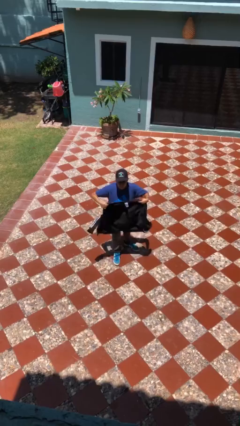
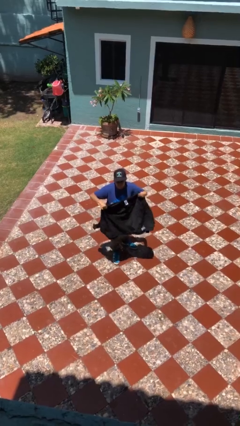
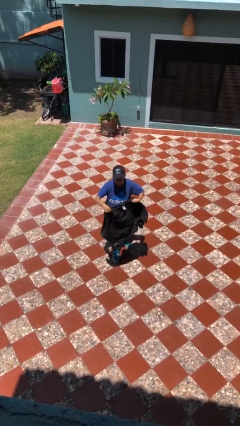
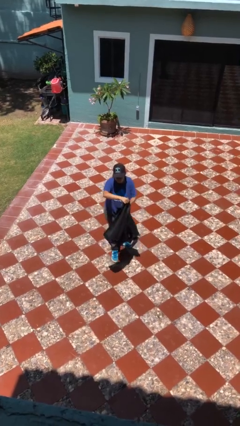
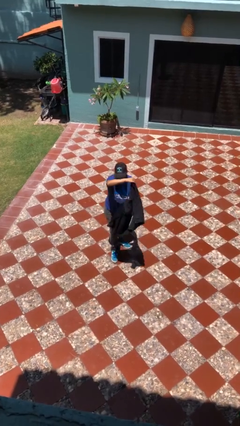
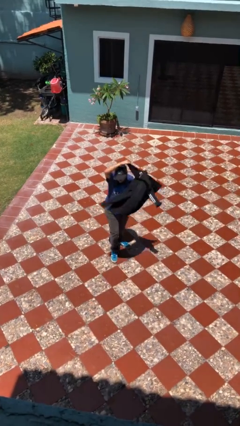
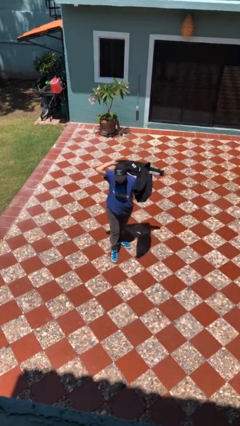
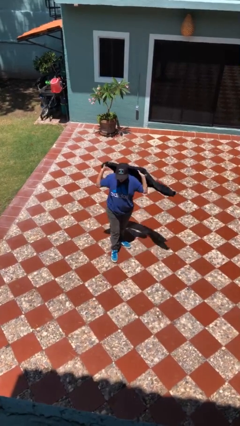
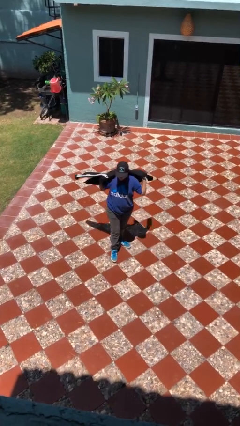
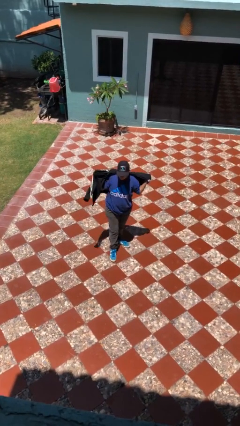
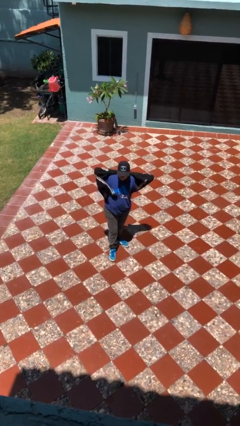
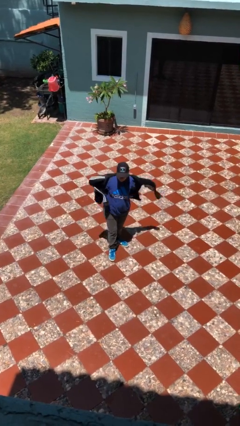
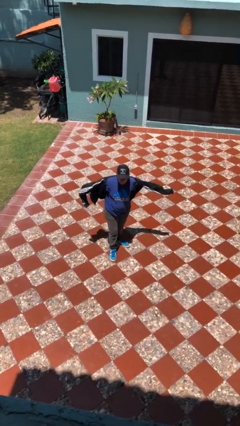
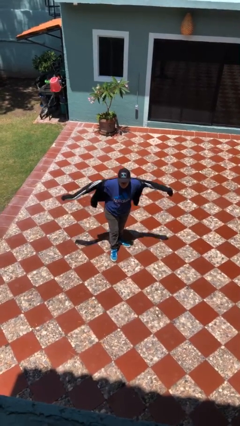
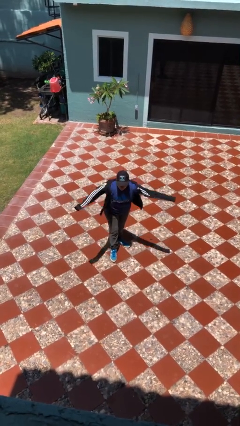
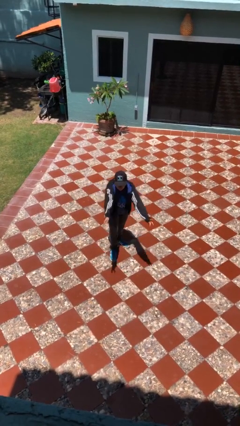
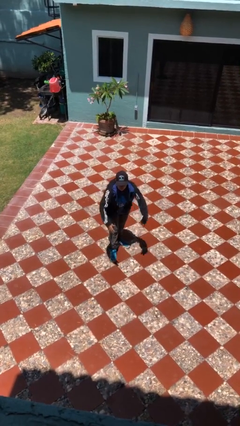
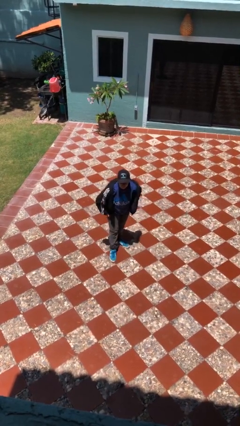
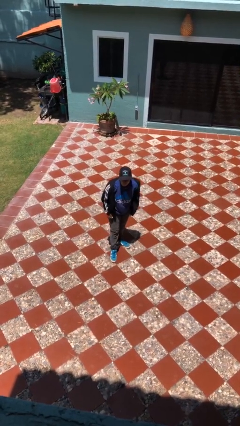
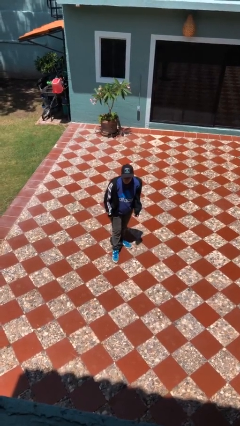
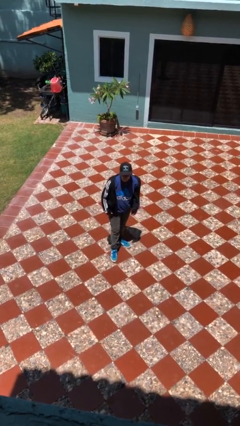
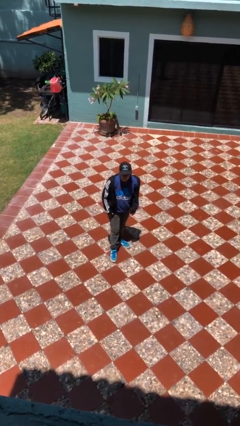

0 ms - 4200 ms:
person puts on jacket

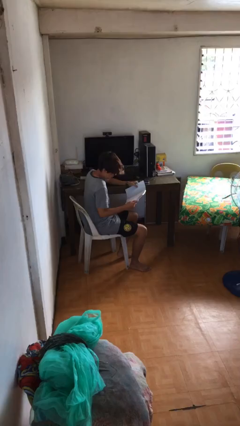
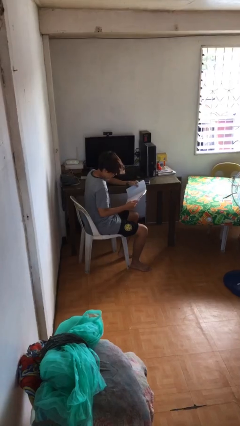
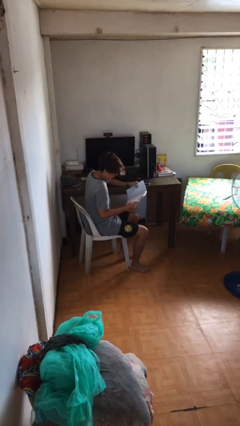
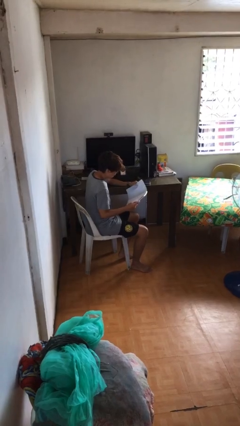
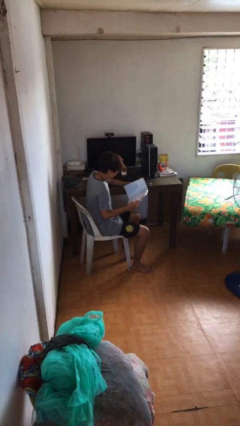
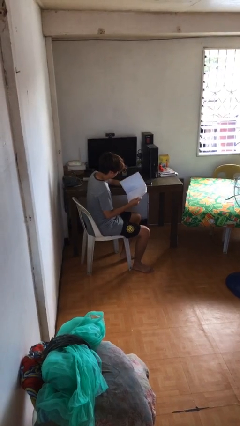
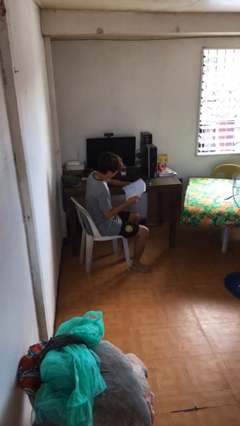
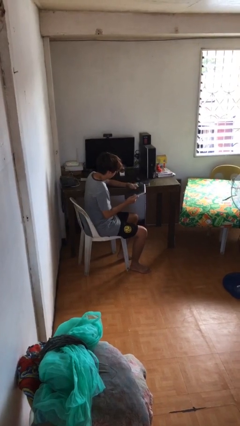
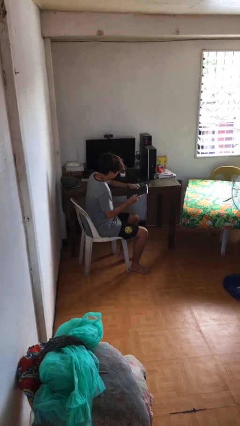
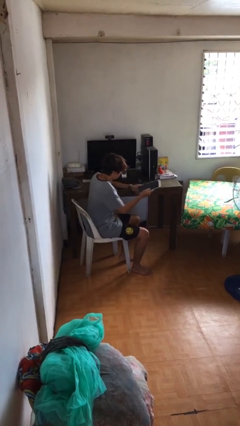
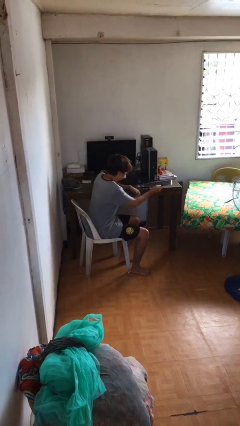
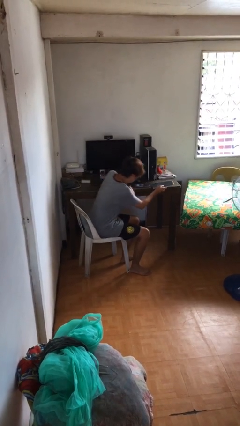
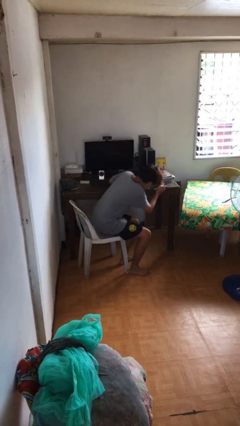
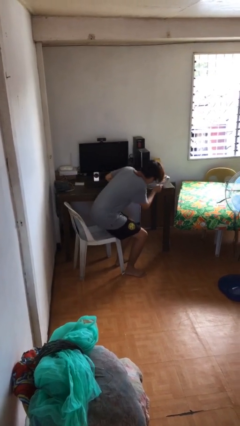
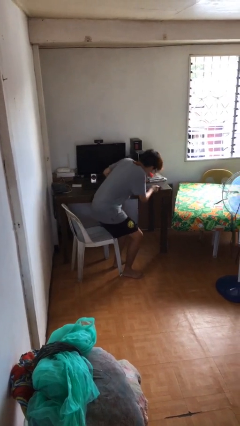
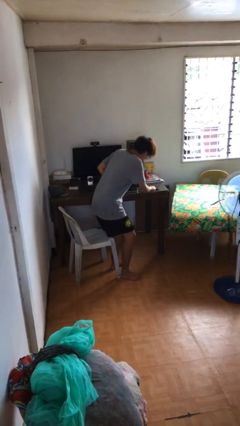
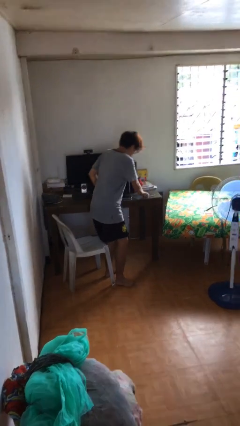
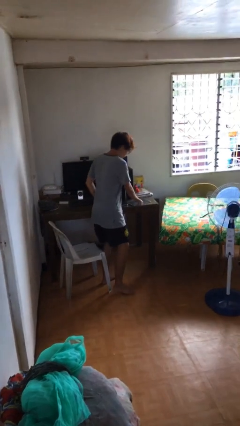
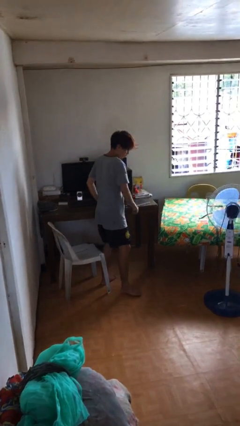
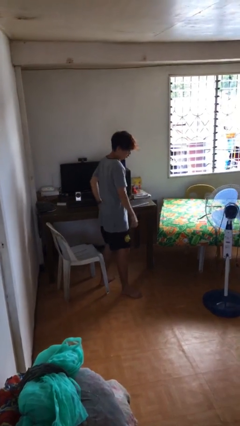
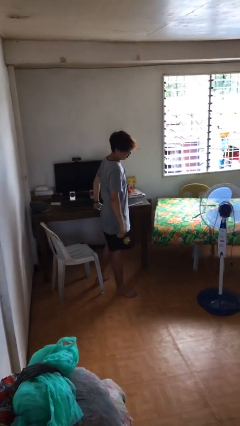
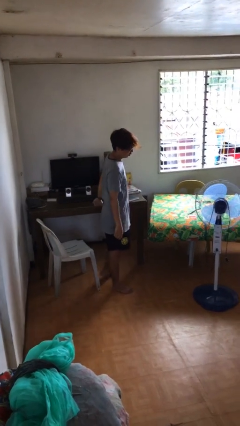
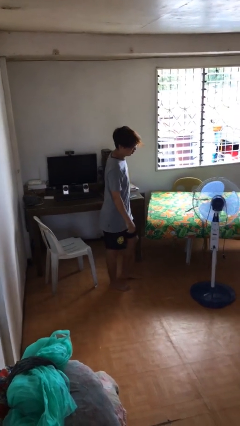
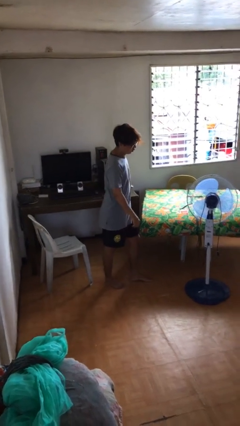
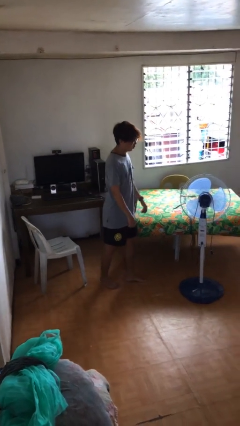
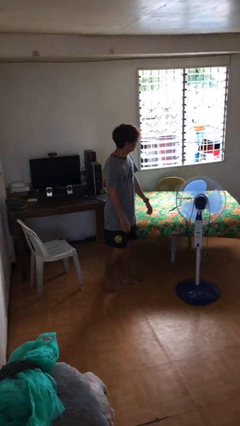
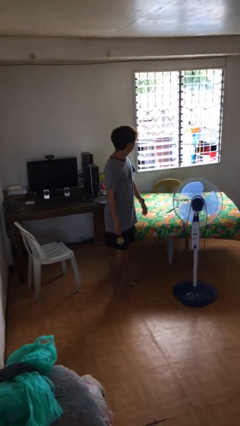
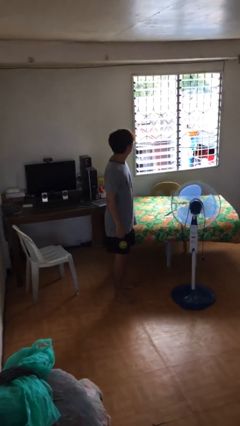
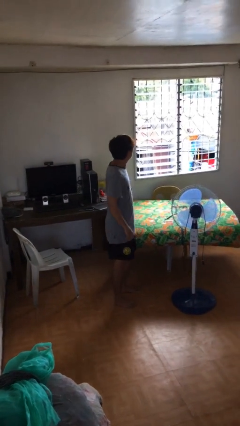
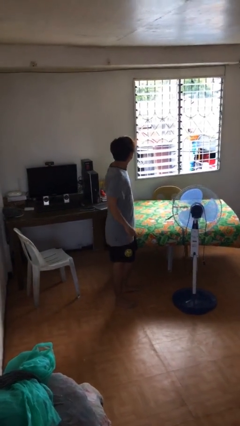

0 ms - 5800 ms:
person stands up

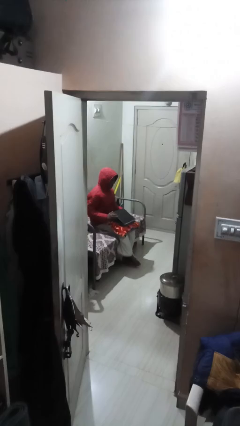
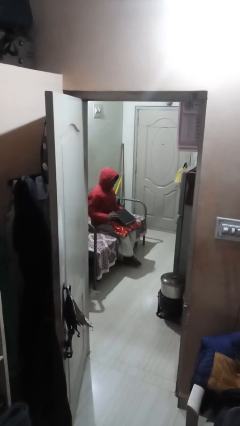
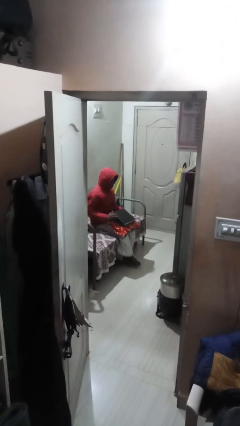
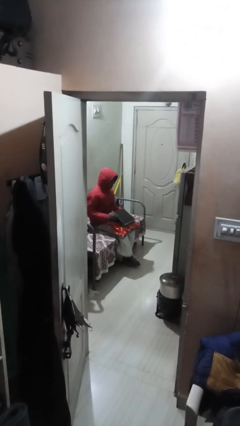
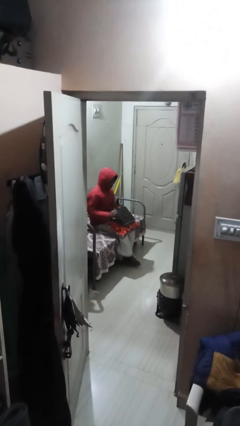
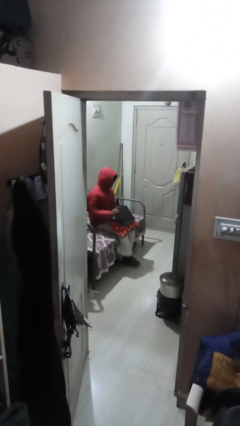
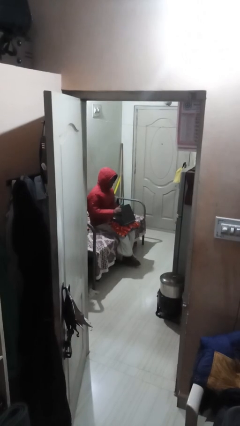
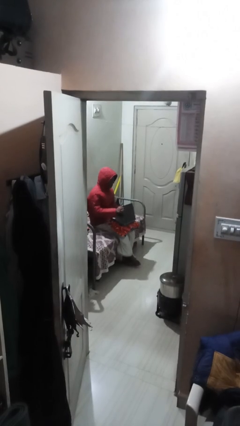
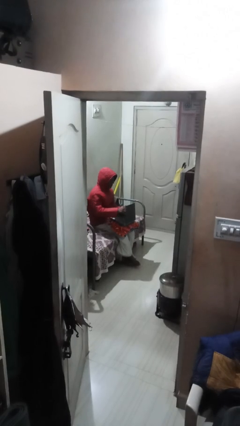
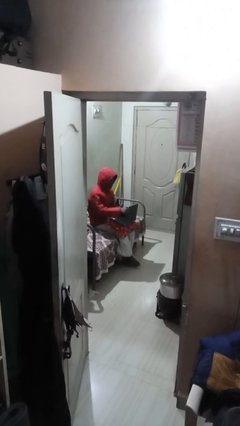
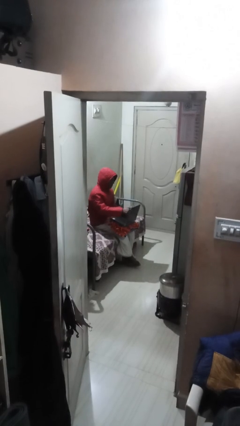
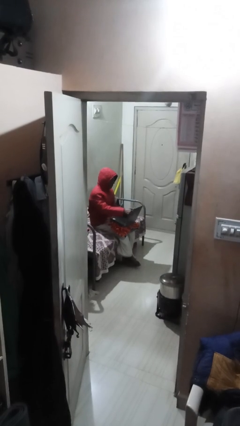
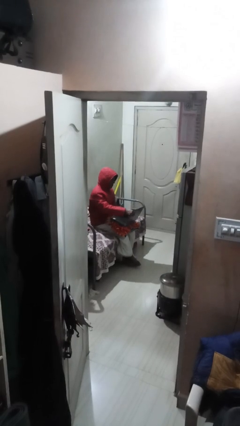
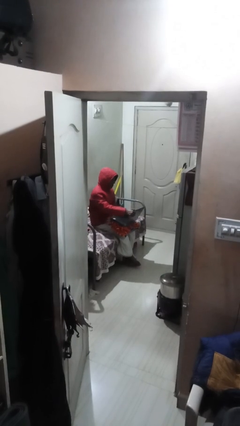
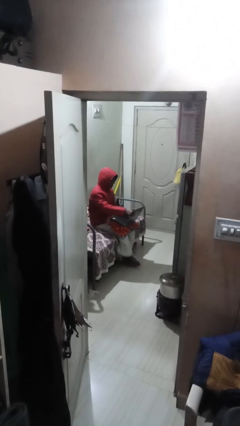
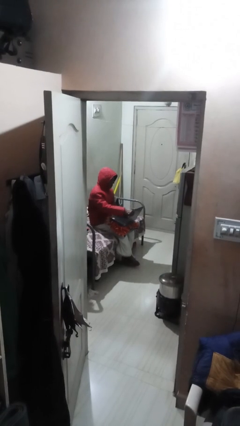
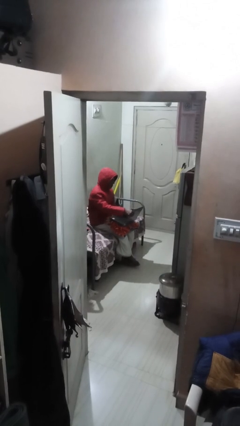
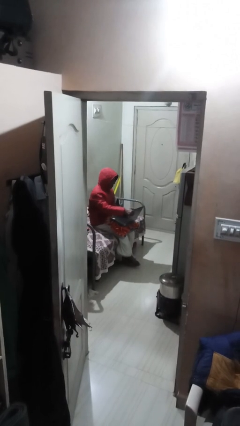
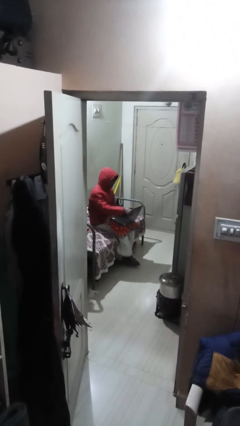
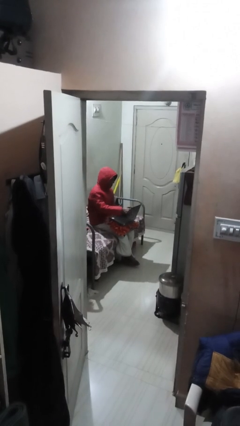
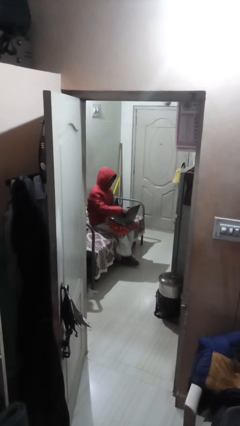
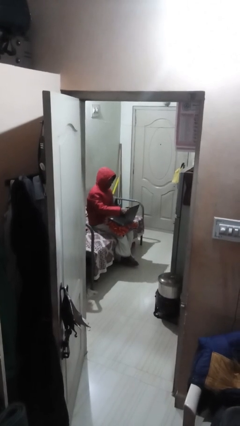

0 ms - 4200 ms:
person interacts with laptop

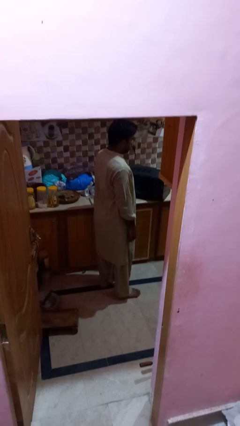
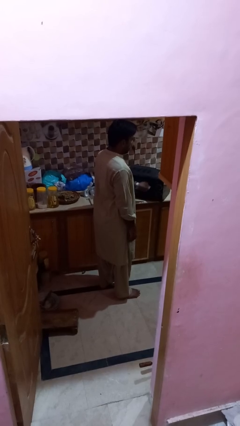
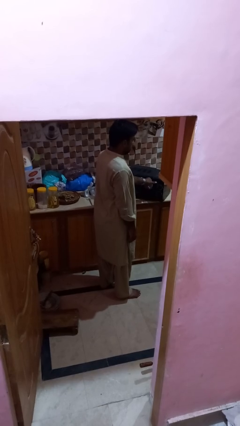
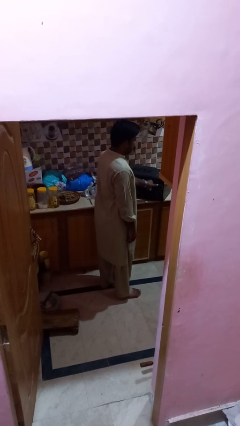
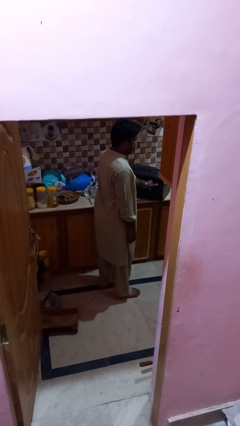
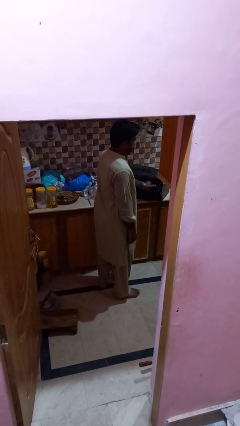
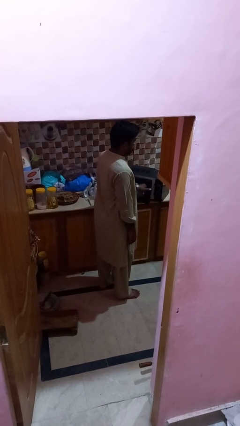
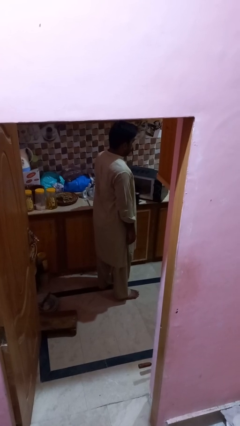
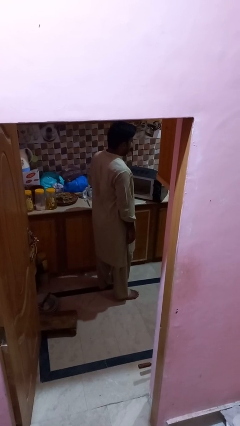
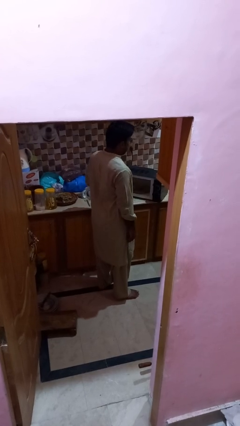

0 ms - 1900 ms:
person opens microwave

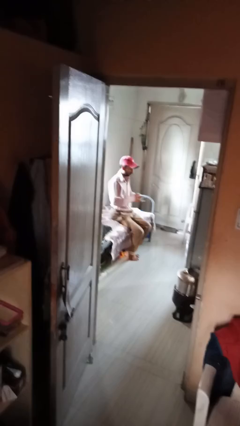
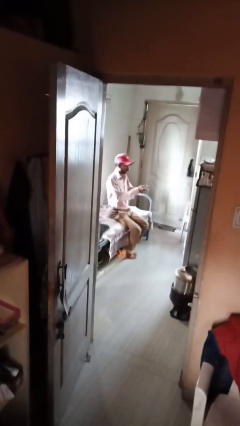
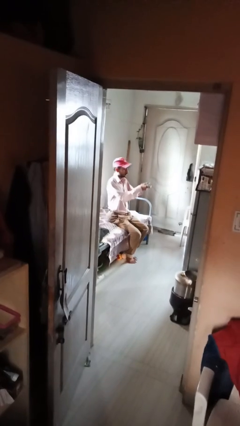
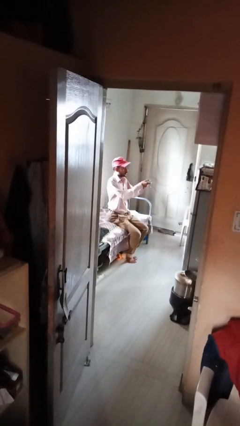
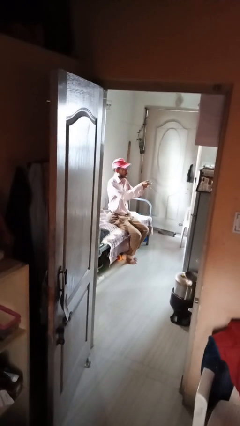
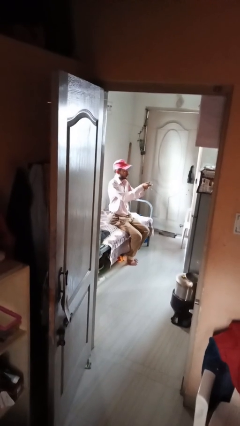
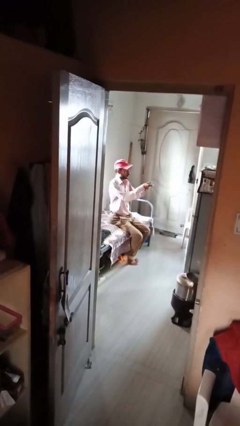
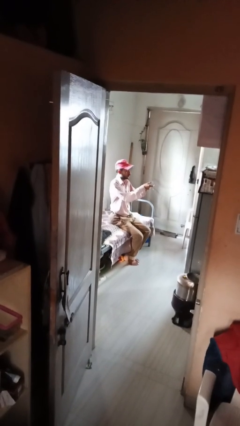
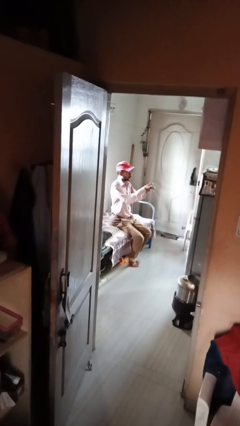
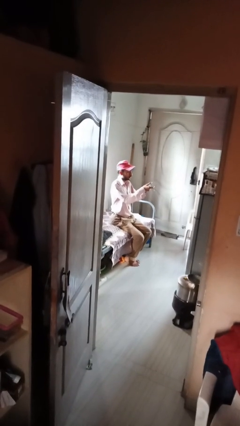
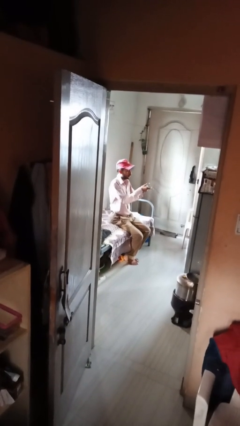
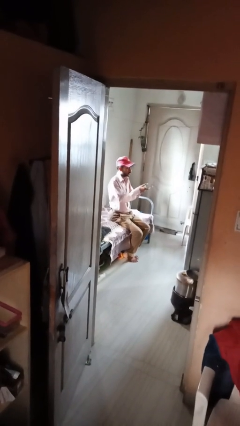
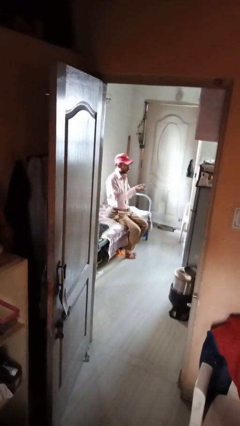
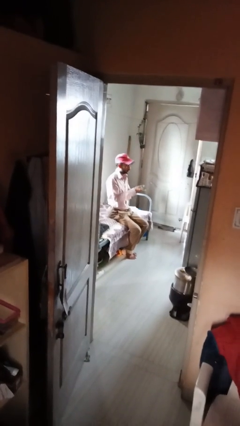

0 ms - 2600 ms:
person clips fingernails
